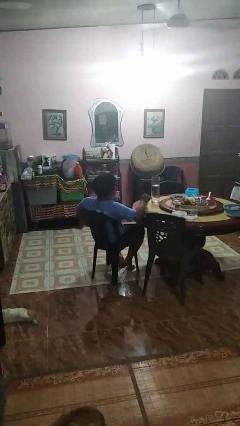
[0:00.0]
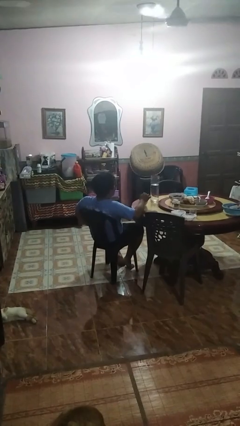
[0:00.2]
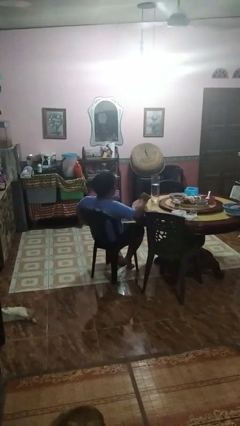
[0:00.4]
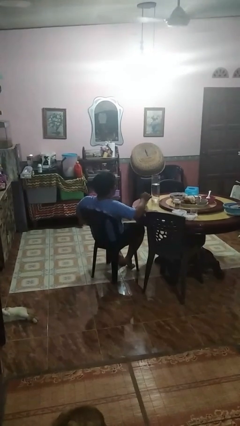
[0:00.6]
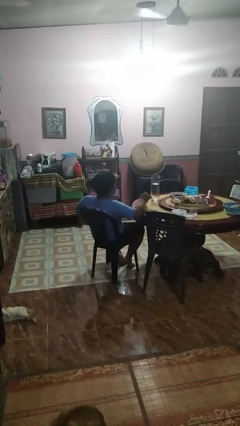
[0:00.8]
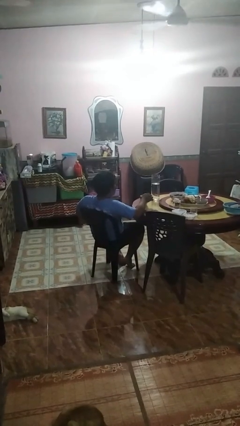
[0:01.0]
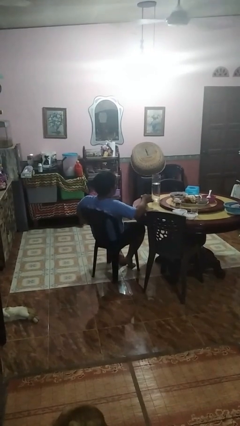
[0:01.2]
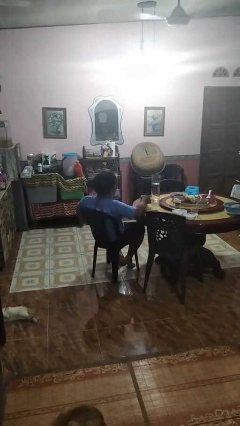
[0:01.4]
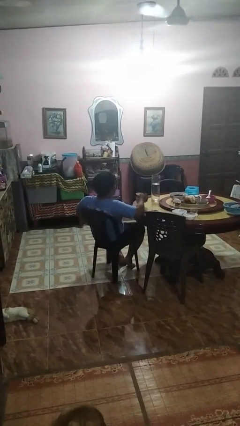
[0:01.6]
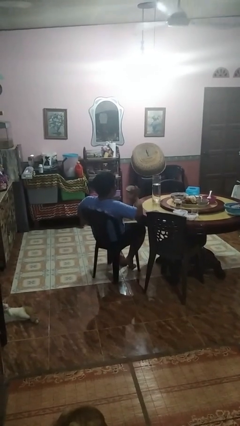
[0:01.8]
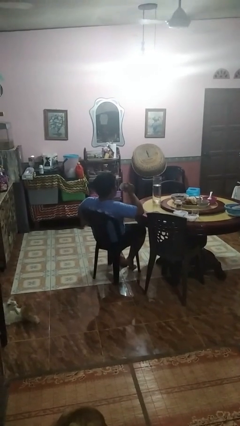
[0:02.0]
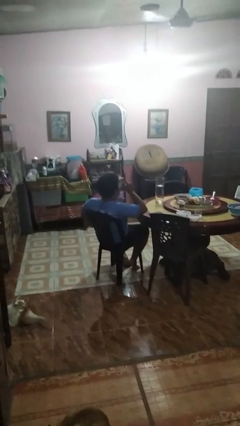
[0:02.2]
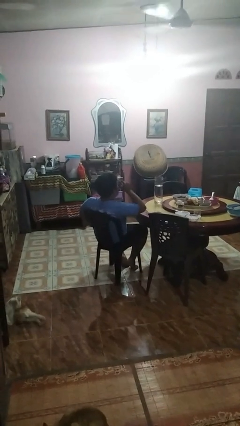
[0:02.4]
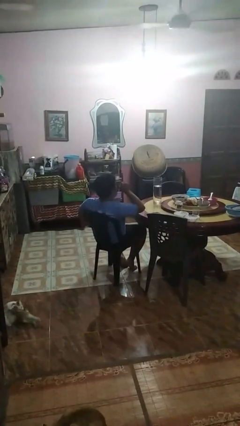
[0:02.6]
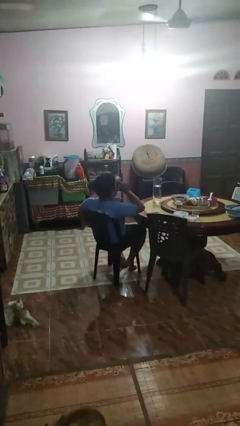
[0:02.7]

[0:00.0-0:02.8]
person stirs mug

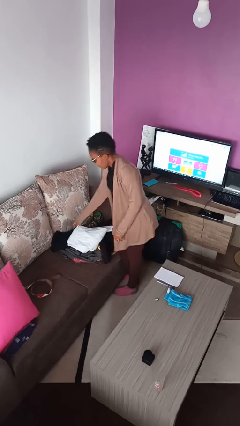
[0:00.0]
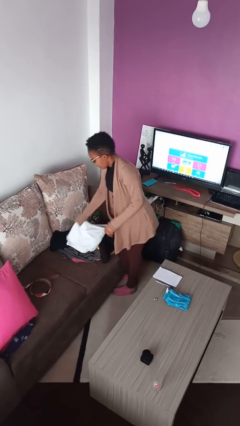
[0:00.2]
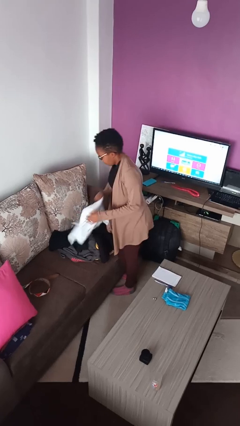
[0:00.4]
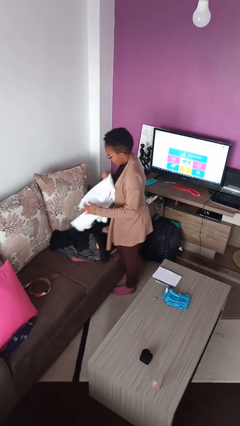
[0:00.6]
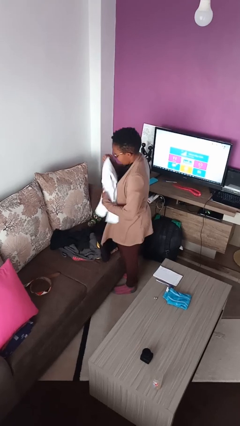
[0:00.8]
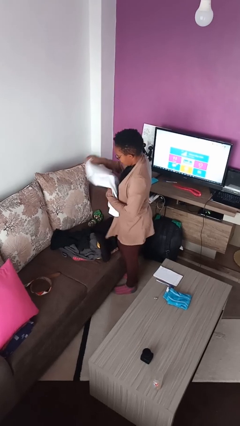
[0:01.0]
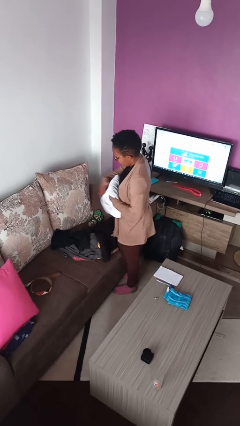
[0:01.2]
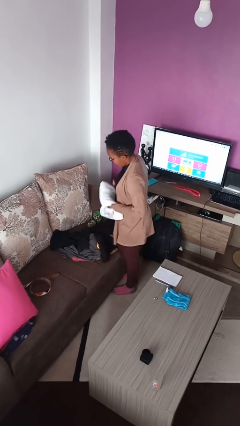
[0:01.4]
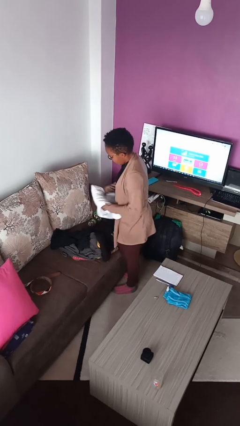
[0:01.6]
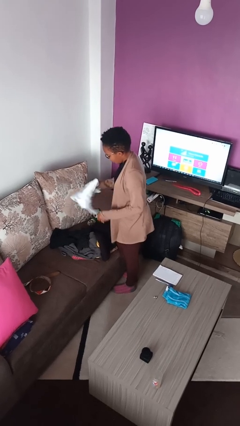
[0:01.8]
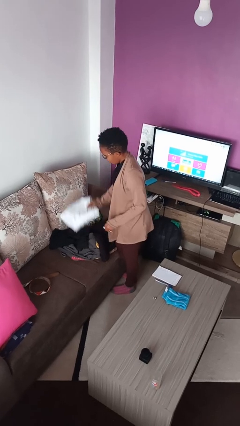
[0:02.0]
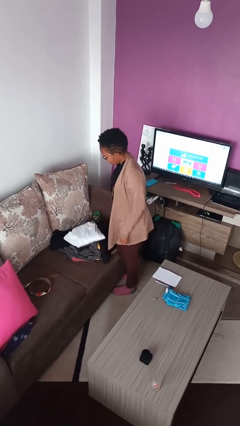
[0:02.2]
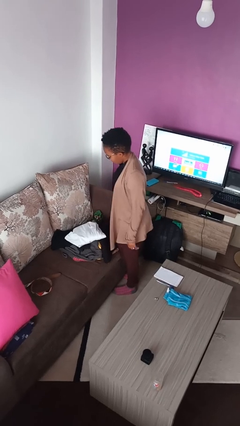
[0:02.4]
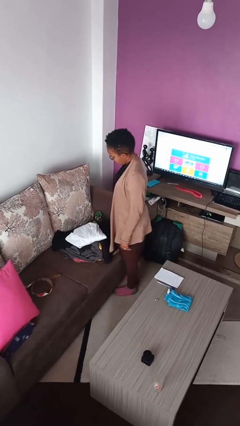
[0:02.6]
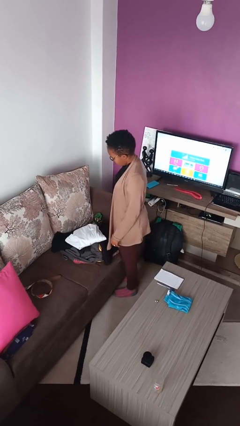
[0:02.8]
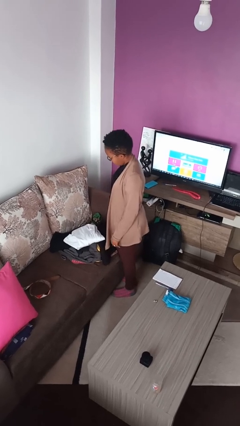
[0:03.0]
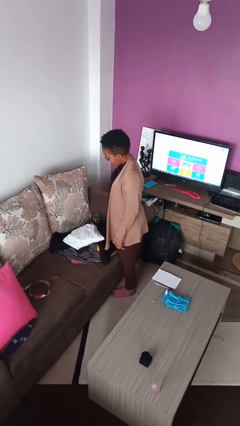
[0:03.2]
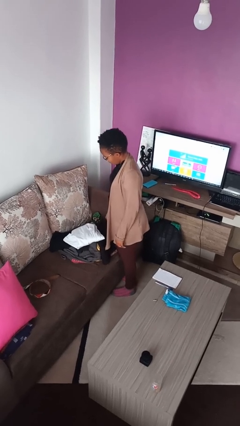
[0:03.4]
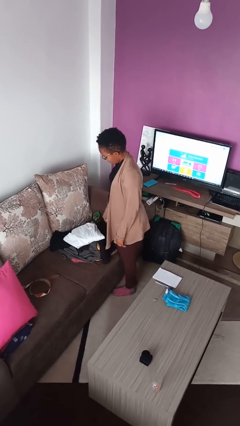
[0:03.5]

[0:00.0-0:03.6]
person folds shirt

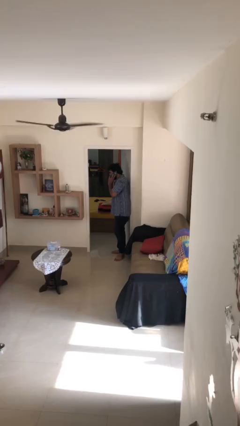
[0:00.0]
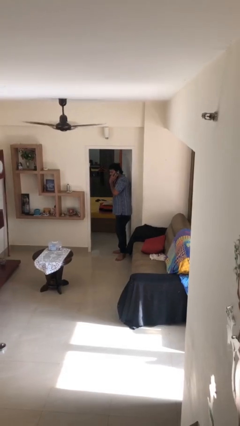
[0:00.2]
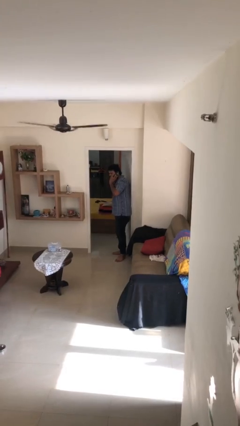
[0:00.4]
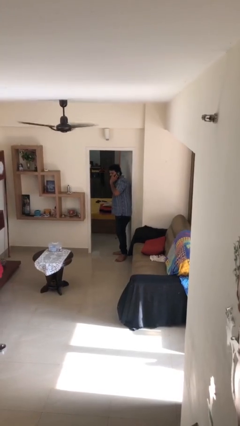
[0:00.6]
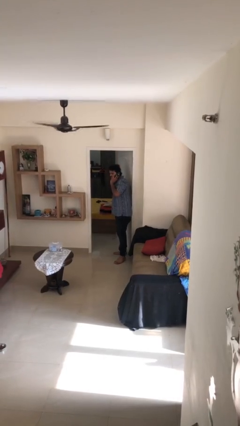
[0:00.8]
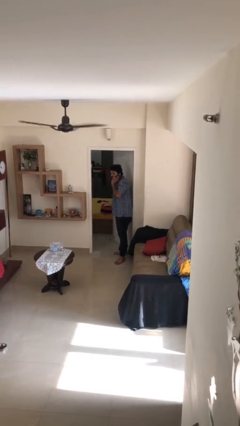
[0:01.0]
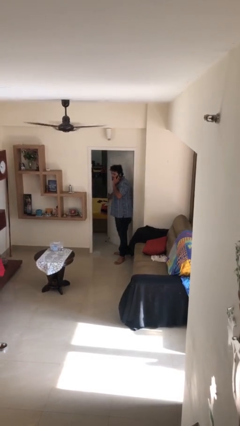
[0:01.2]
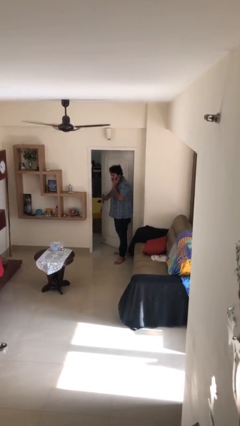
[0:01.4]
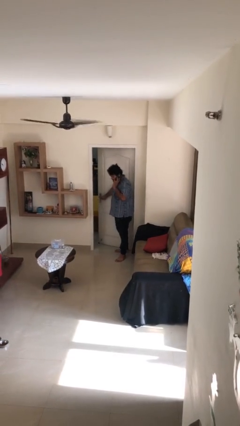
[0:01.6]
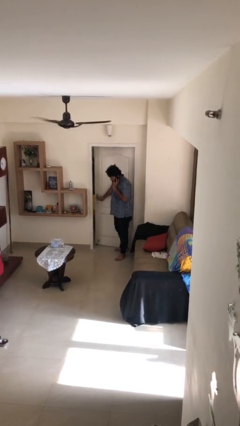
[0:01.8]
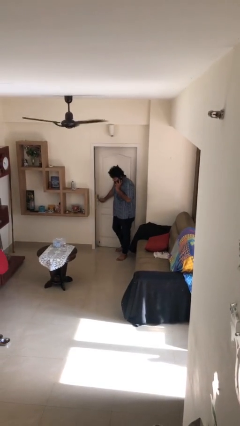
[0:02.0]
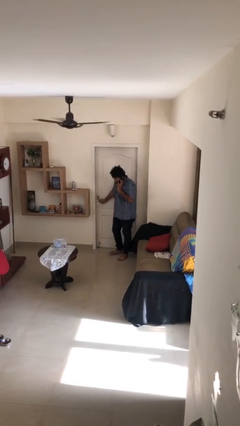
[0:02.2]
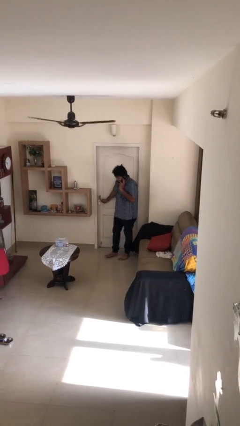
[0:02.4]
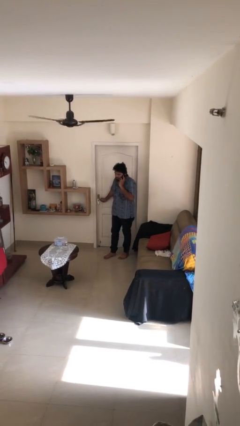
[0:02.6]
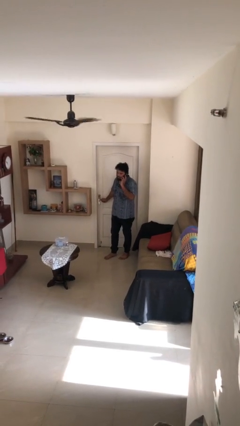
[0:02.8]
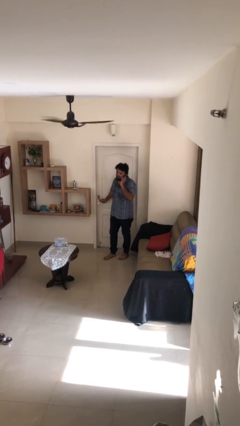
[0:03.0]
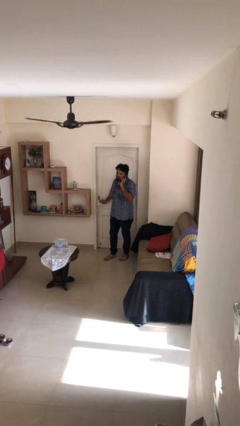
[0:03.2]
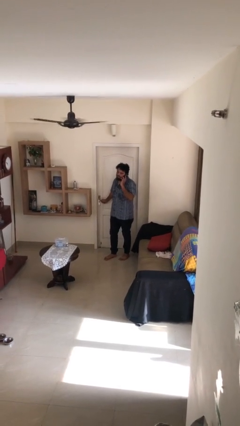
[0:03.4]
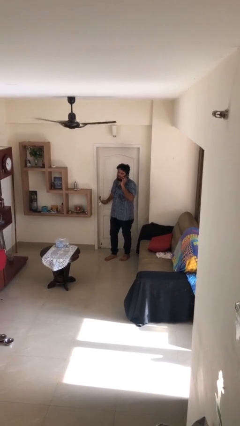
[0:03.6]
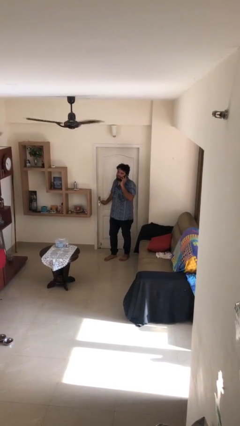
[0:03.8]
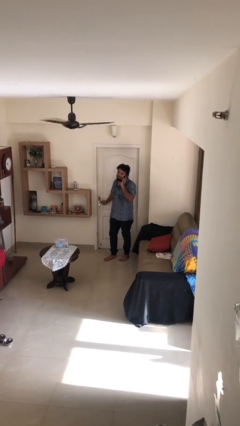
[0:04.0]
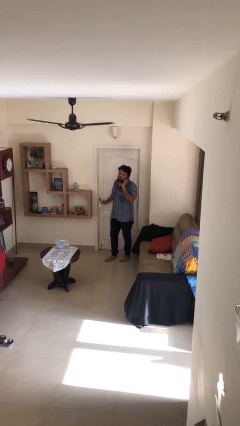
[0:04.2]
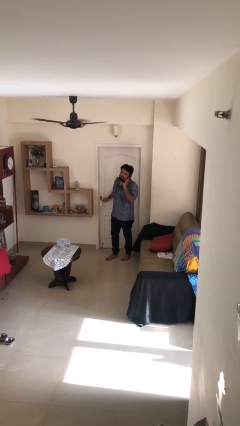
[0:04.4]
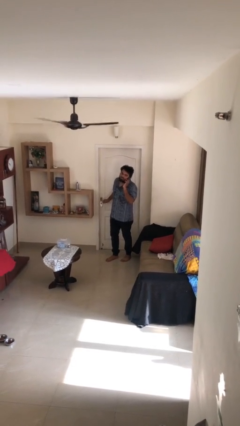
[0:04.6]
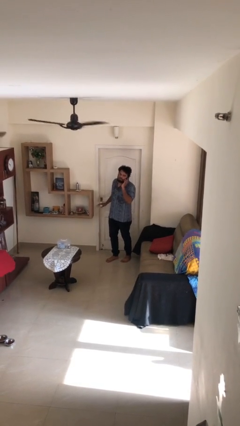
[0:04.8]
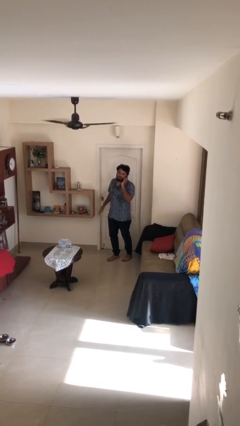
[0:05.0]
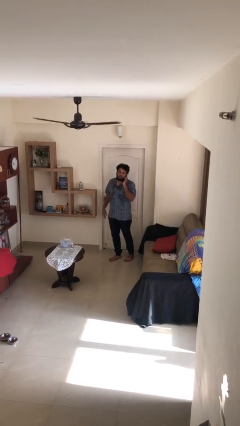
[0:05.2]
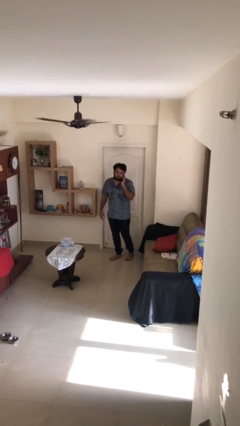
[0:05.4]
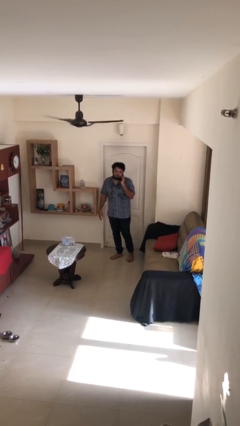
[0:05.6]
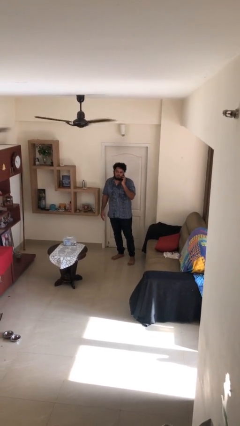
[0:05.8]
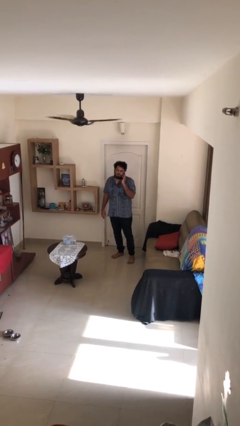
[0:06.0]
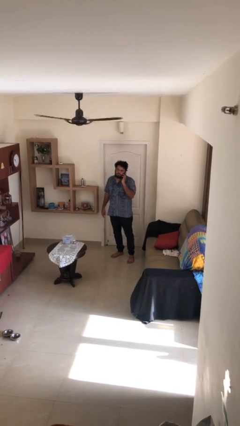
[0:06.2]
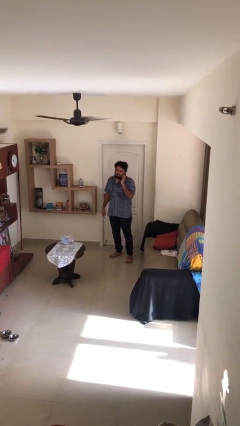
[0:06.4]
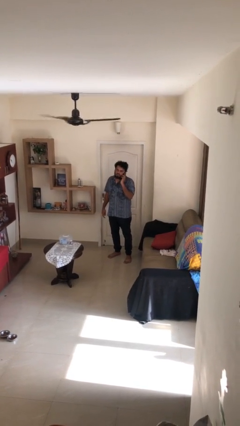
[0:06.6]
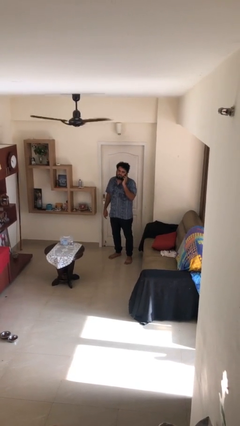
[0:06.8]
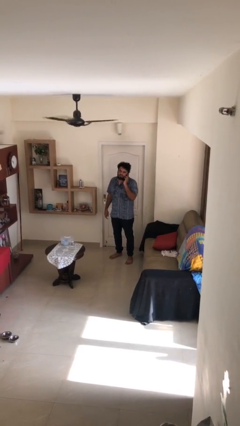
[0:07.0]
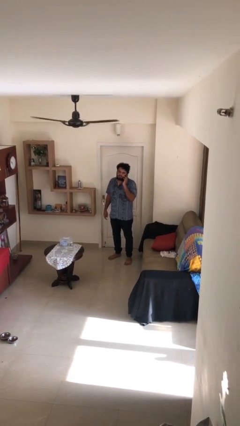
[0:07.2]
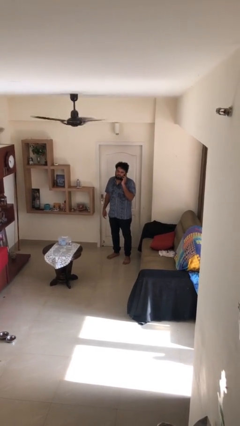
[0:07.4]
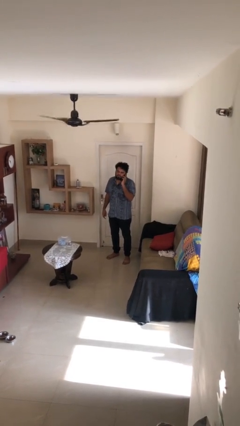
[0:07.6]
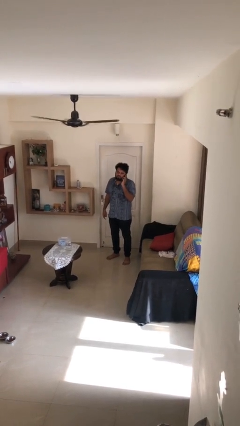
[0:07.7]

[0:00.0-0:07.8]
person closes facility door

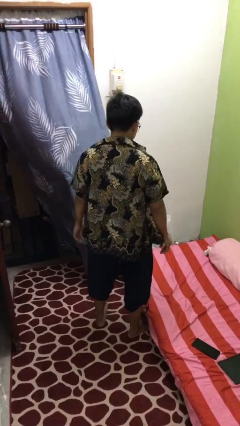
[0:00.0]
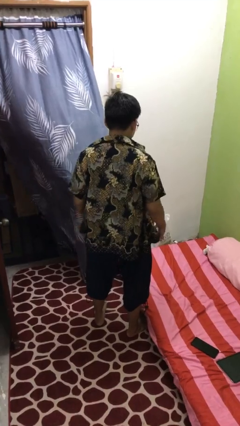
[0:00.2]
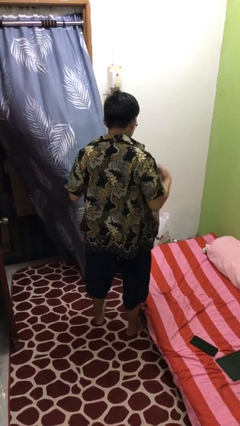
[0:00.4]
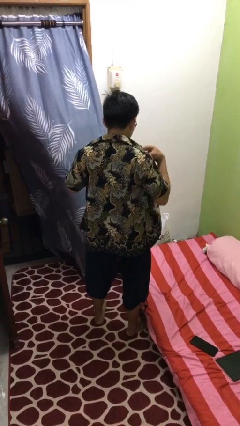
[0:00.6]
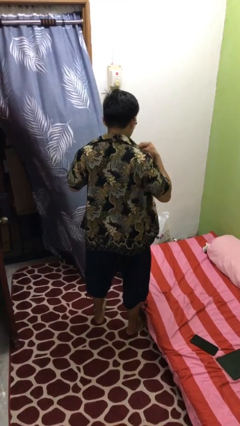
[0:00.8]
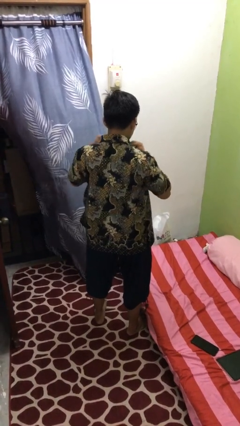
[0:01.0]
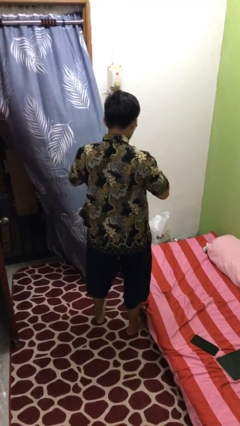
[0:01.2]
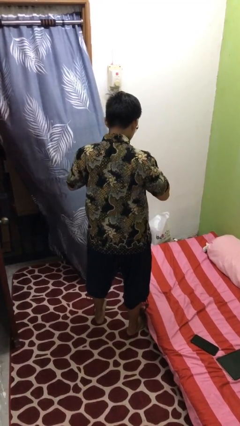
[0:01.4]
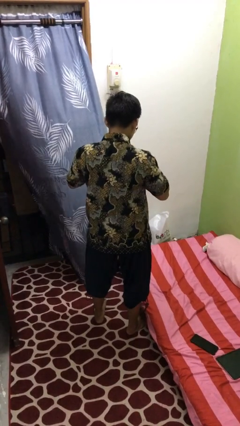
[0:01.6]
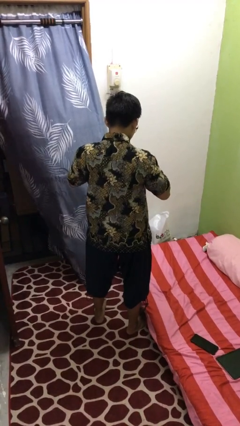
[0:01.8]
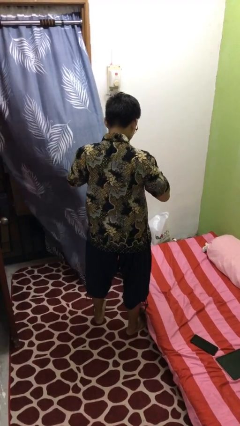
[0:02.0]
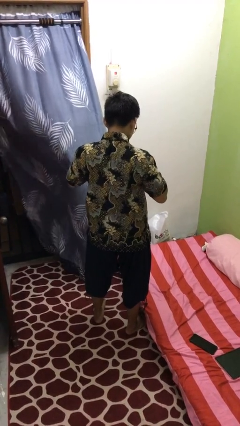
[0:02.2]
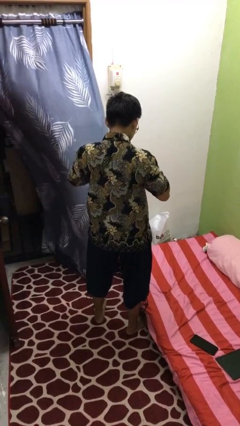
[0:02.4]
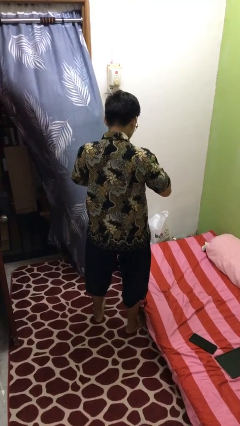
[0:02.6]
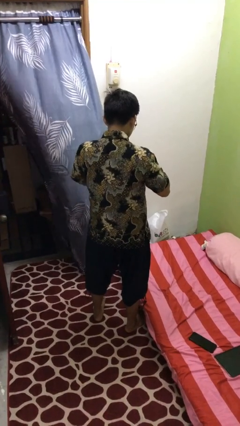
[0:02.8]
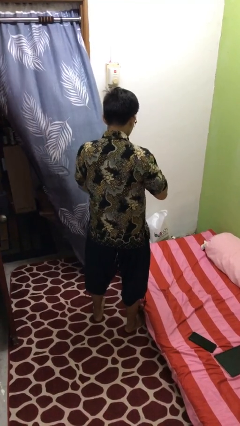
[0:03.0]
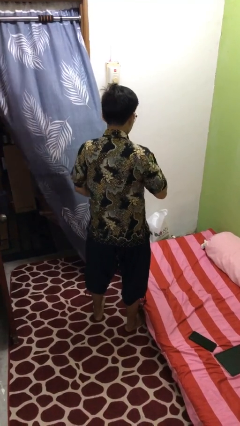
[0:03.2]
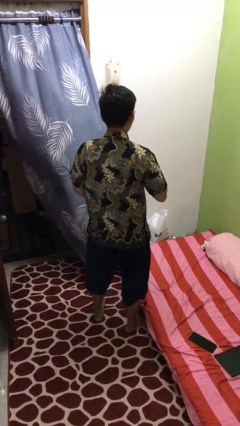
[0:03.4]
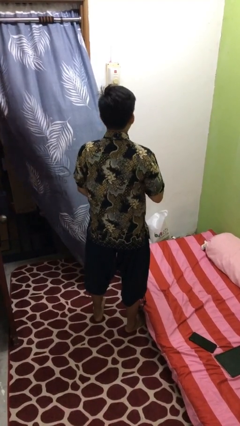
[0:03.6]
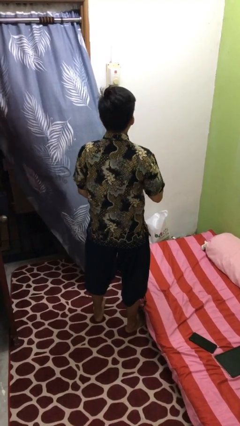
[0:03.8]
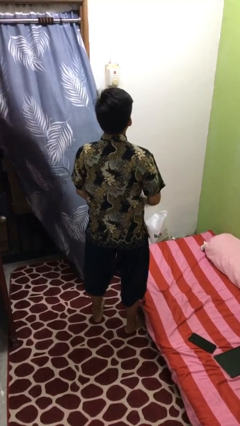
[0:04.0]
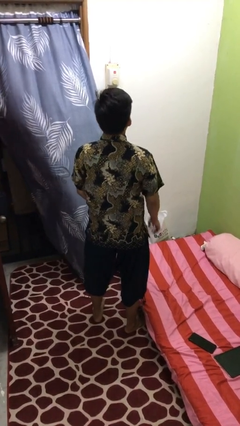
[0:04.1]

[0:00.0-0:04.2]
person buttons shirt
